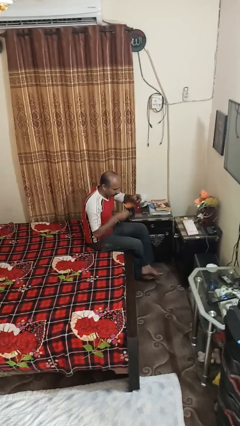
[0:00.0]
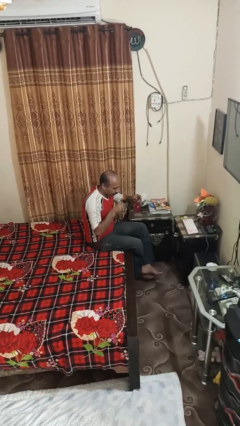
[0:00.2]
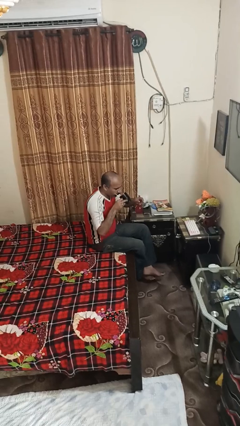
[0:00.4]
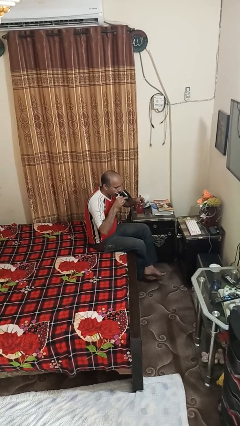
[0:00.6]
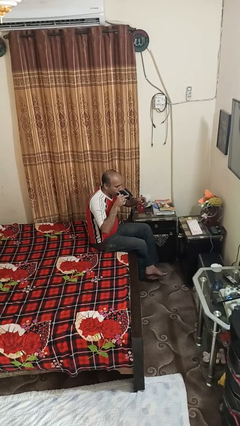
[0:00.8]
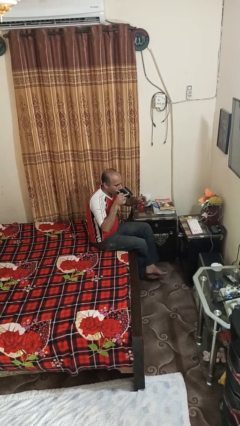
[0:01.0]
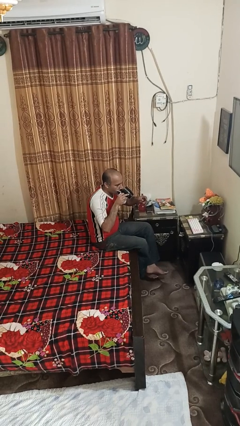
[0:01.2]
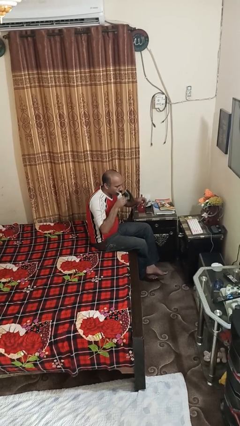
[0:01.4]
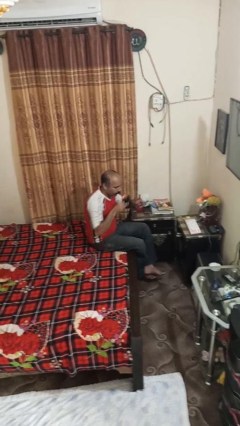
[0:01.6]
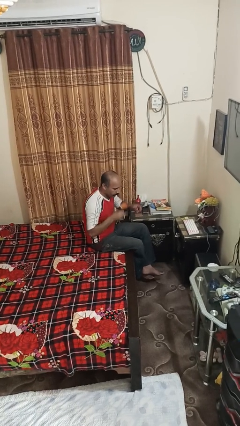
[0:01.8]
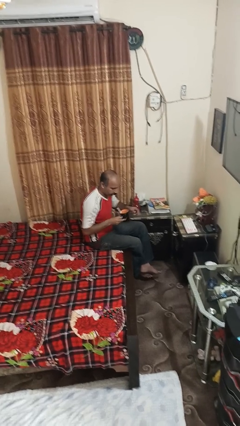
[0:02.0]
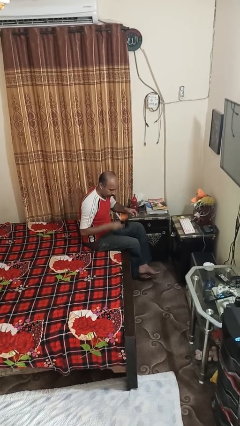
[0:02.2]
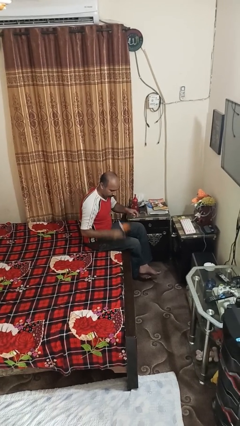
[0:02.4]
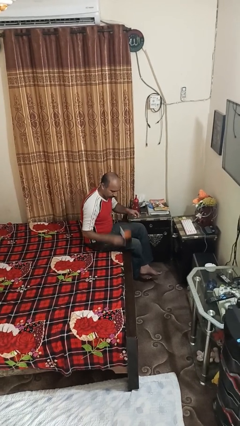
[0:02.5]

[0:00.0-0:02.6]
person drinks from mug

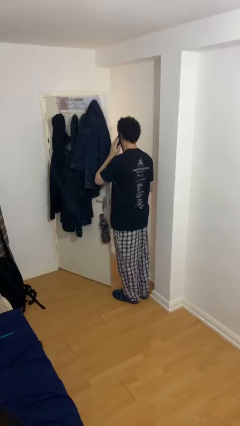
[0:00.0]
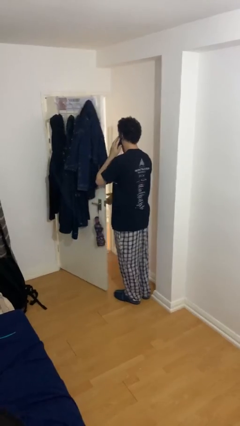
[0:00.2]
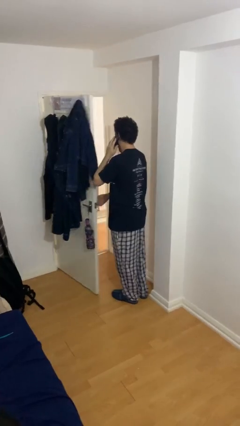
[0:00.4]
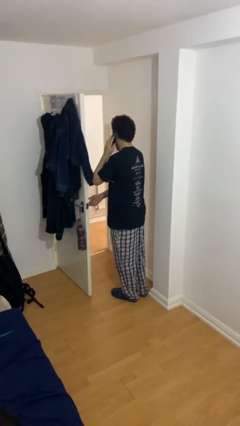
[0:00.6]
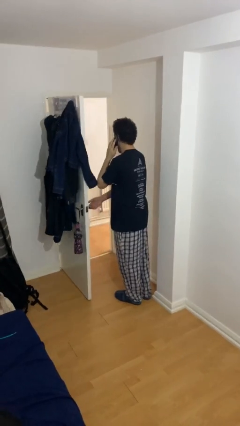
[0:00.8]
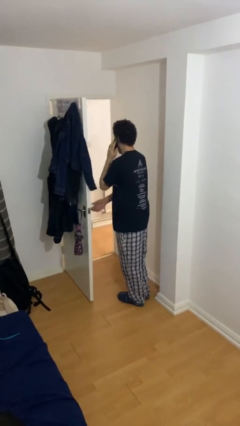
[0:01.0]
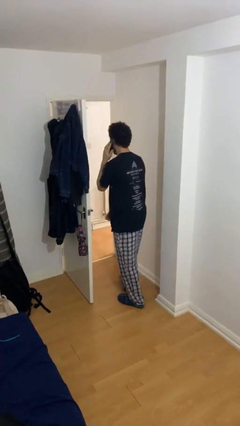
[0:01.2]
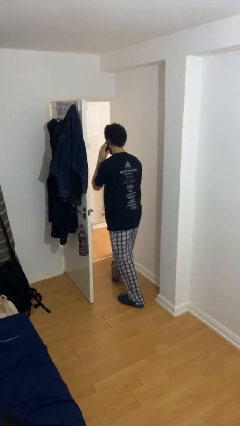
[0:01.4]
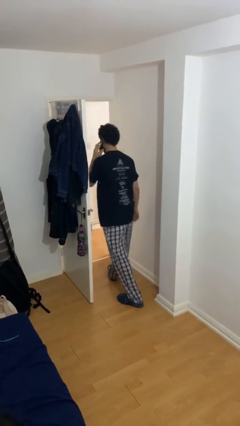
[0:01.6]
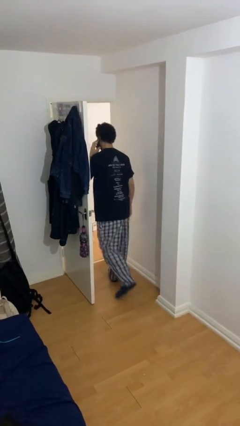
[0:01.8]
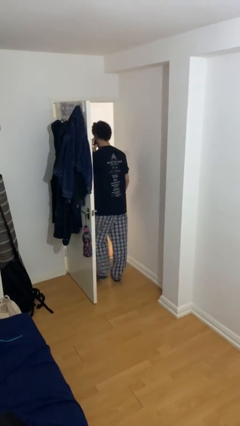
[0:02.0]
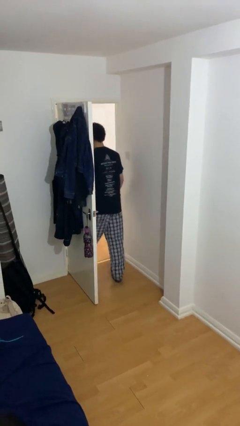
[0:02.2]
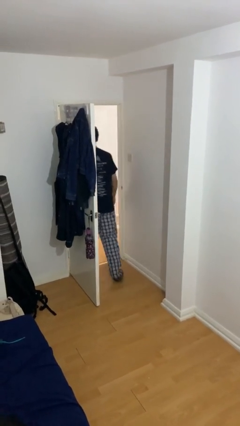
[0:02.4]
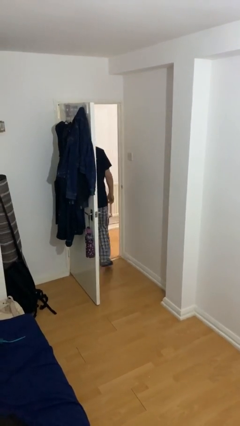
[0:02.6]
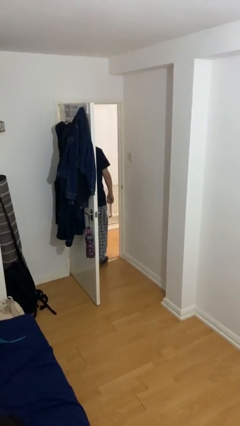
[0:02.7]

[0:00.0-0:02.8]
person exits scene through structure

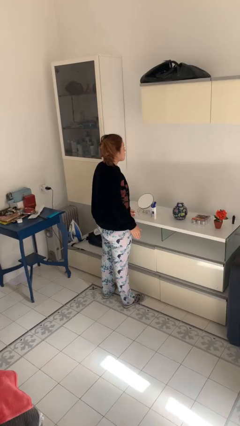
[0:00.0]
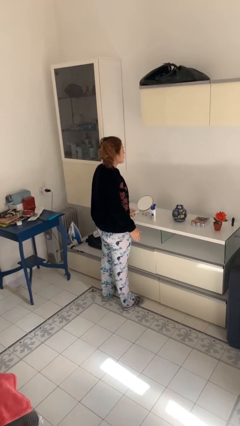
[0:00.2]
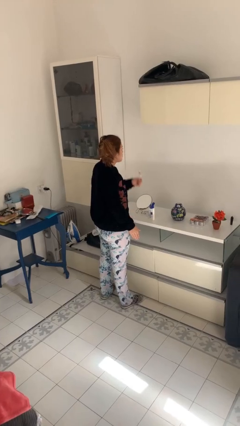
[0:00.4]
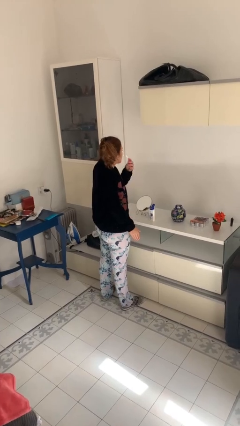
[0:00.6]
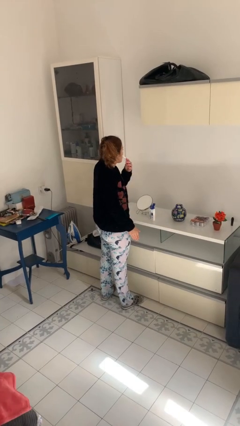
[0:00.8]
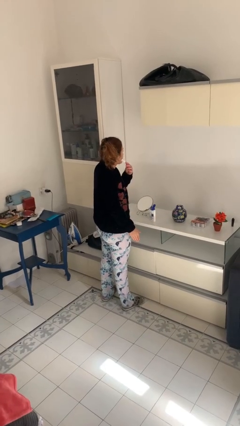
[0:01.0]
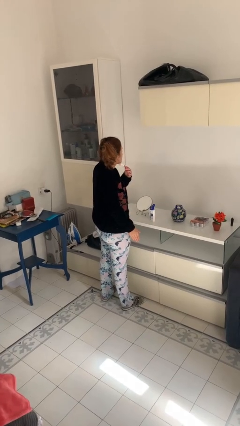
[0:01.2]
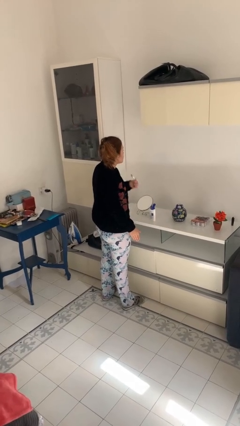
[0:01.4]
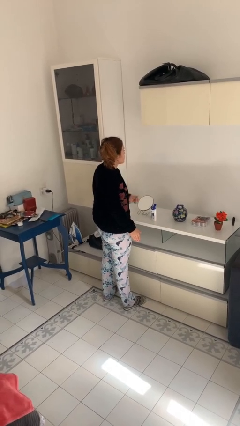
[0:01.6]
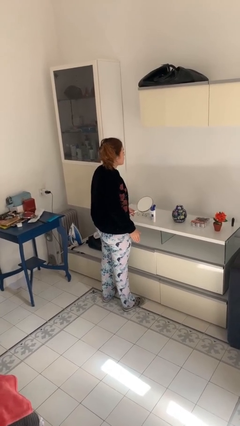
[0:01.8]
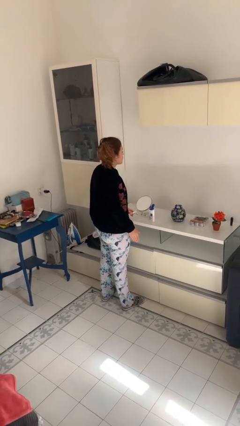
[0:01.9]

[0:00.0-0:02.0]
person shaves face

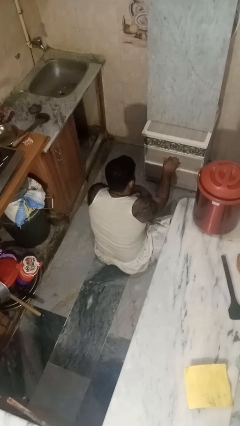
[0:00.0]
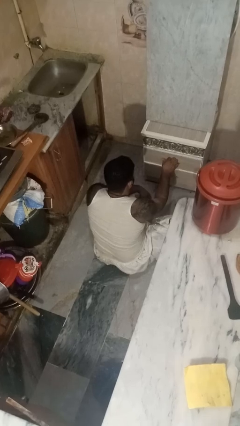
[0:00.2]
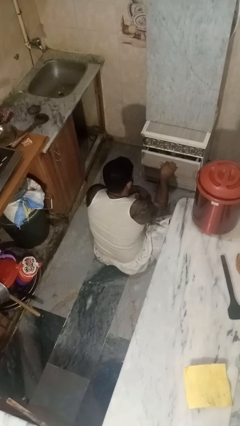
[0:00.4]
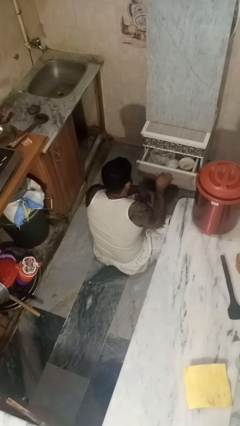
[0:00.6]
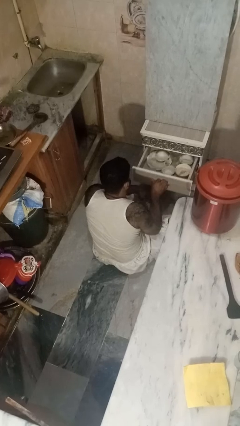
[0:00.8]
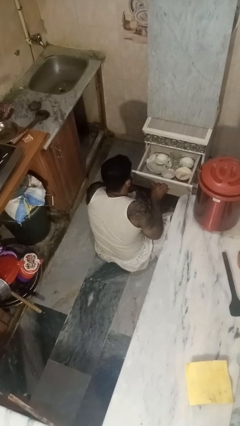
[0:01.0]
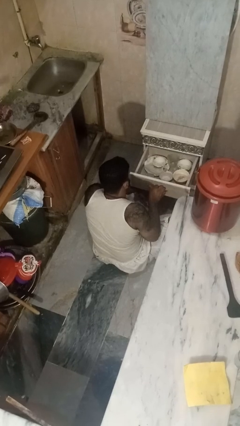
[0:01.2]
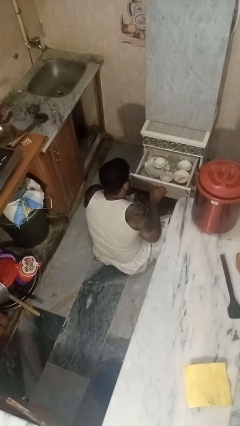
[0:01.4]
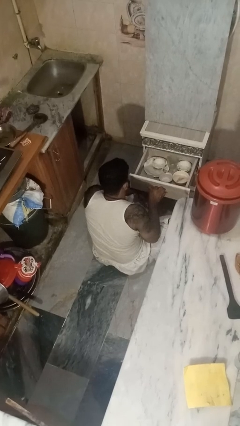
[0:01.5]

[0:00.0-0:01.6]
person opens kitchen drawer

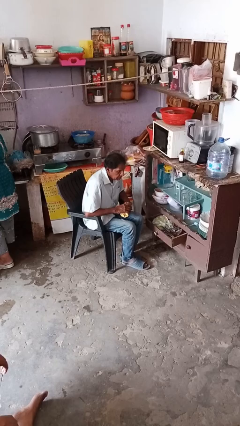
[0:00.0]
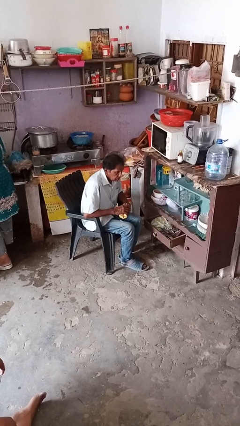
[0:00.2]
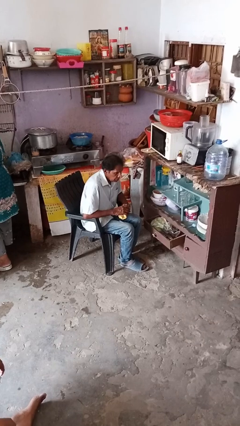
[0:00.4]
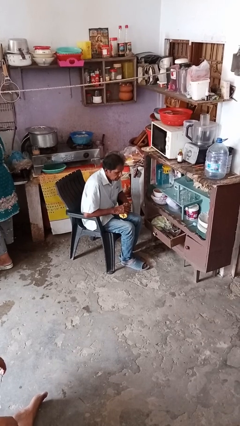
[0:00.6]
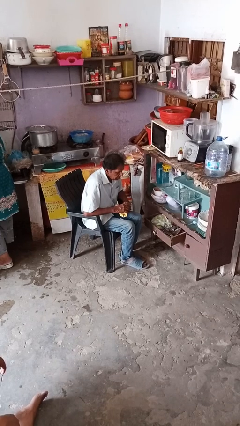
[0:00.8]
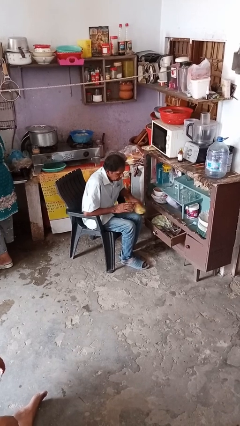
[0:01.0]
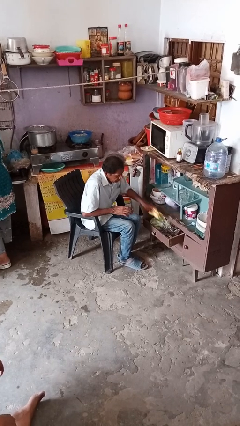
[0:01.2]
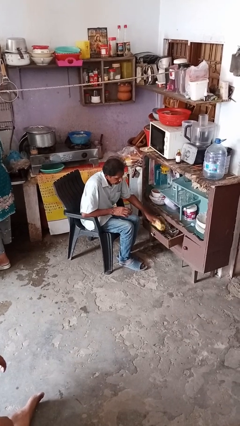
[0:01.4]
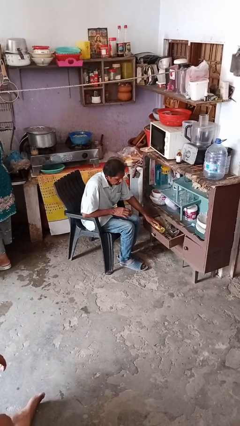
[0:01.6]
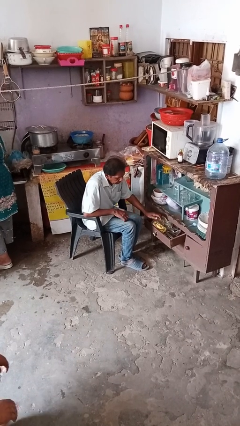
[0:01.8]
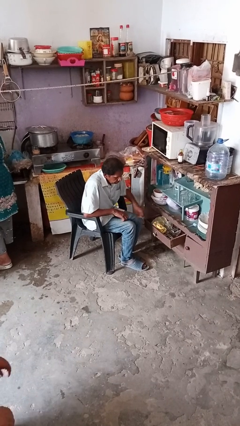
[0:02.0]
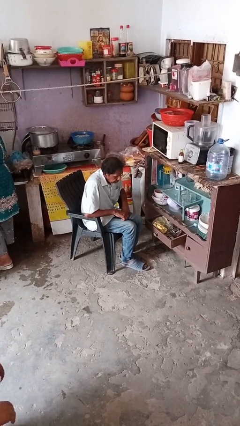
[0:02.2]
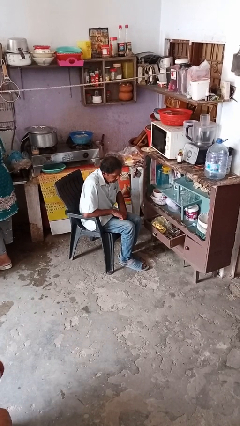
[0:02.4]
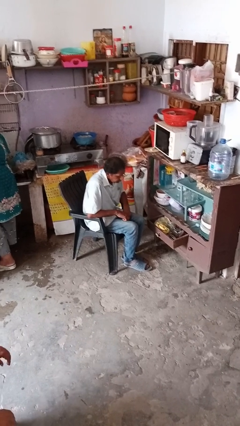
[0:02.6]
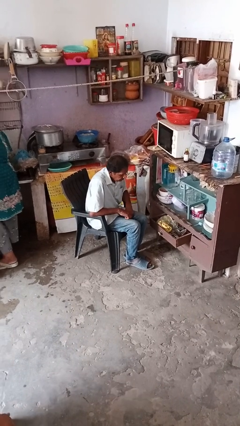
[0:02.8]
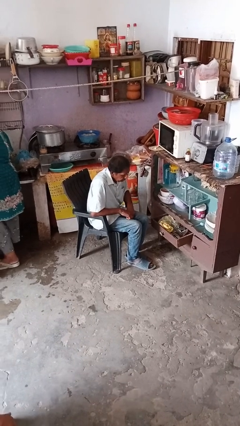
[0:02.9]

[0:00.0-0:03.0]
person puts clothes into dresser

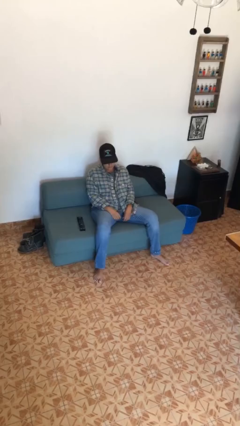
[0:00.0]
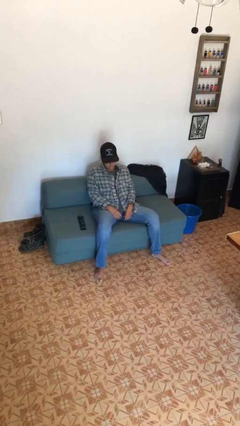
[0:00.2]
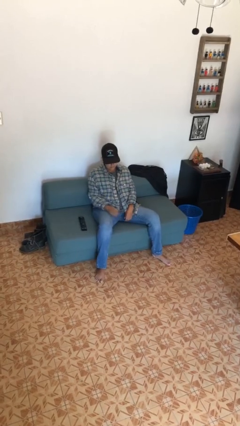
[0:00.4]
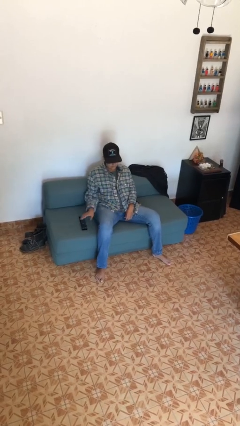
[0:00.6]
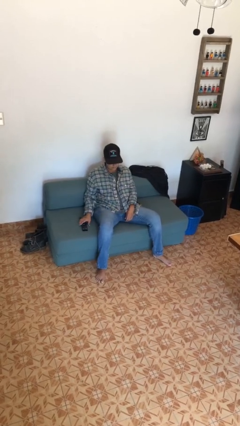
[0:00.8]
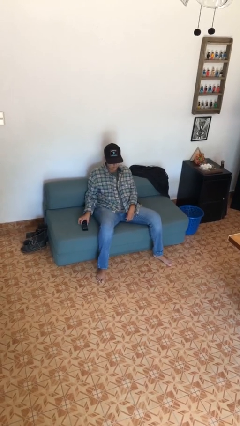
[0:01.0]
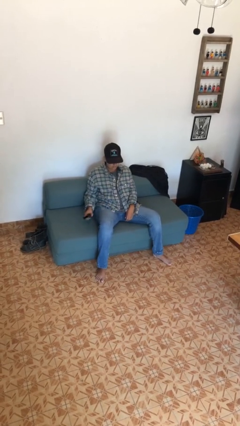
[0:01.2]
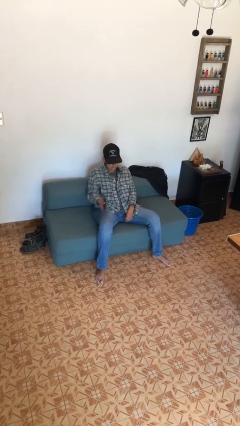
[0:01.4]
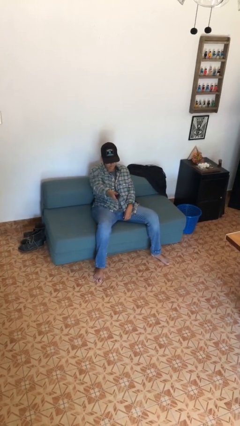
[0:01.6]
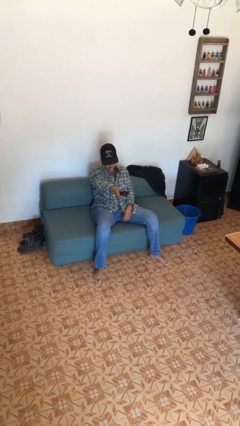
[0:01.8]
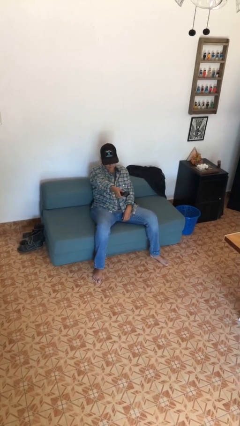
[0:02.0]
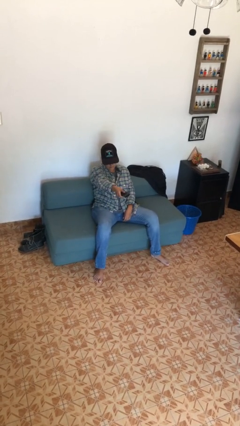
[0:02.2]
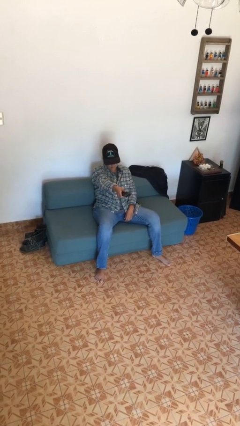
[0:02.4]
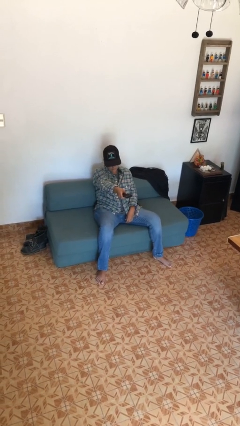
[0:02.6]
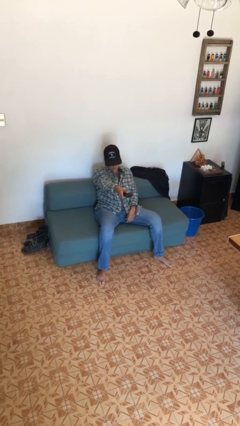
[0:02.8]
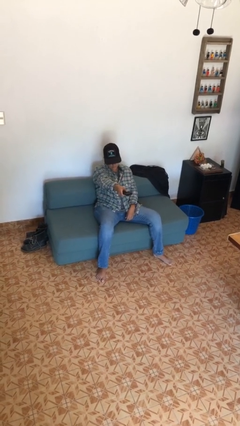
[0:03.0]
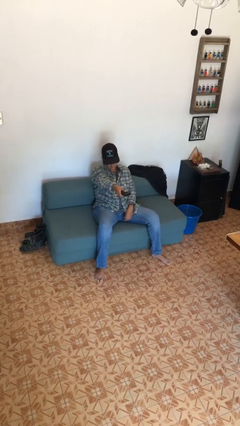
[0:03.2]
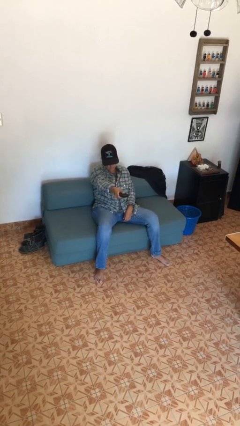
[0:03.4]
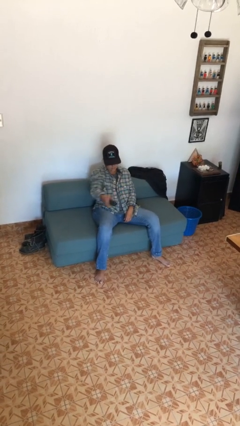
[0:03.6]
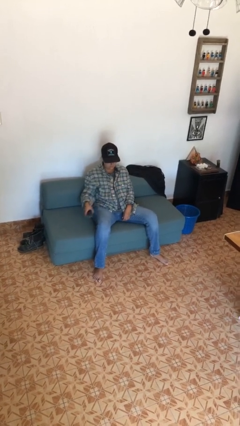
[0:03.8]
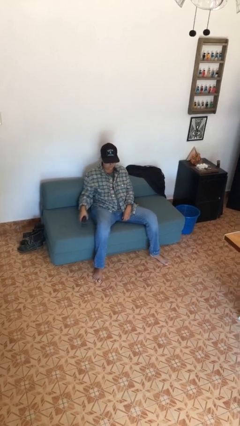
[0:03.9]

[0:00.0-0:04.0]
person uses television remote

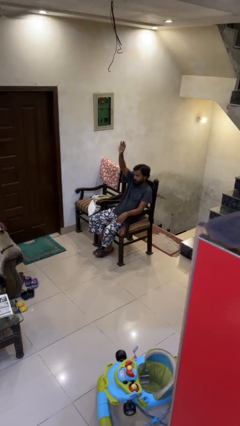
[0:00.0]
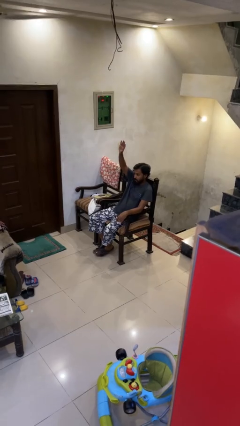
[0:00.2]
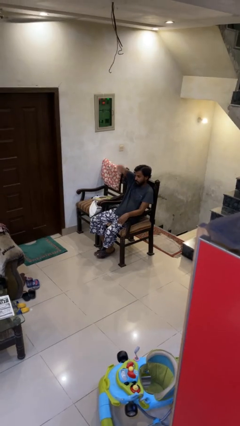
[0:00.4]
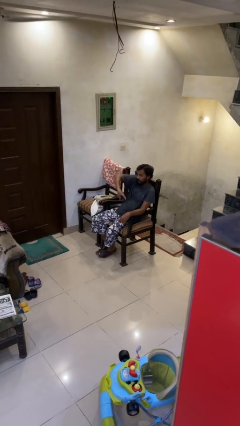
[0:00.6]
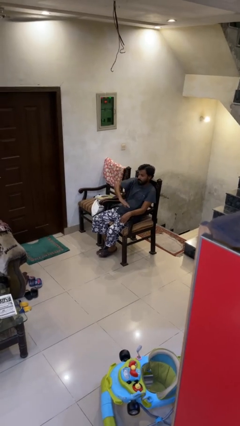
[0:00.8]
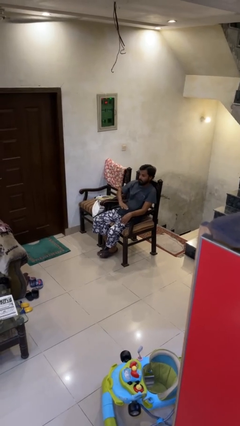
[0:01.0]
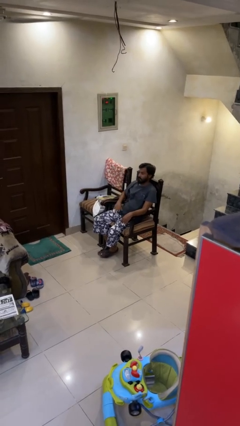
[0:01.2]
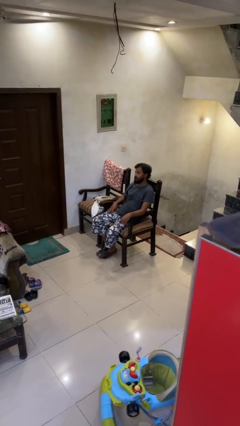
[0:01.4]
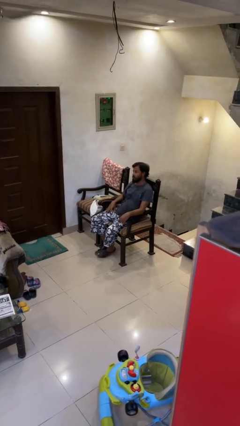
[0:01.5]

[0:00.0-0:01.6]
person gestures swipe down
